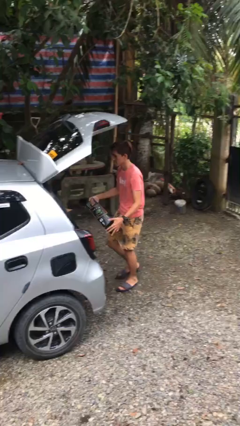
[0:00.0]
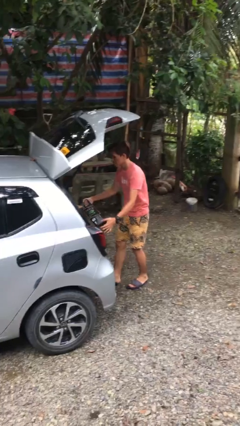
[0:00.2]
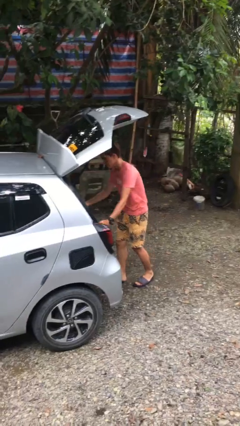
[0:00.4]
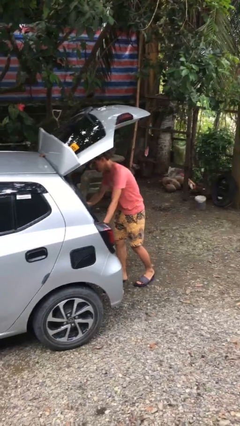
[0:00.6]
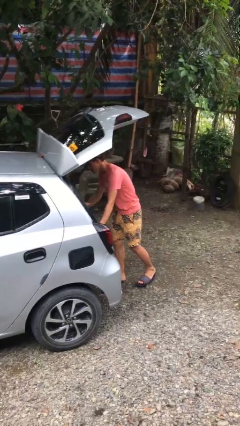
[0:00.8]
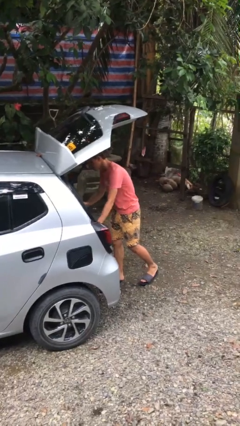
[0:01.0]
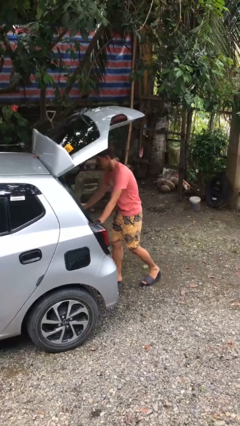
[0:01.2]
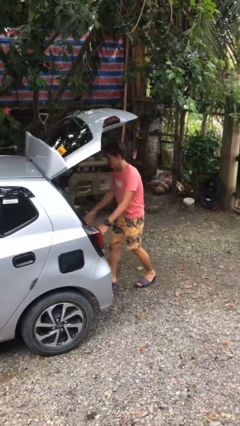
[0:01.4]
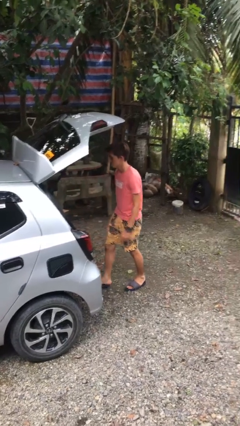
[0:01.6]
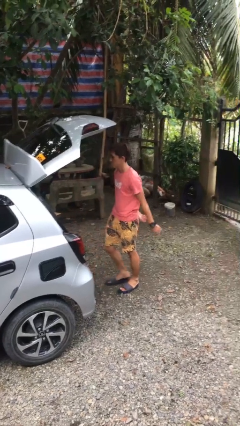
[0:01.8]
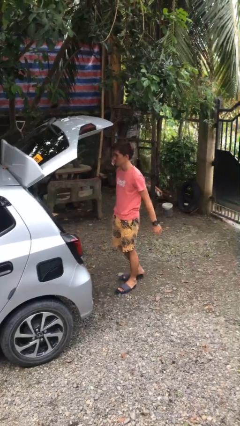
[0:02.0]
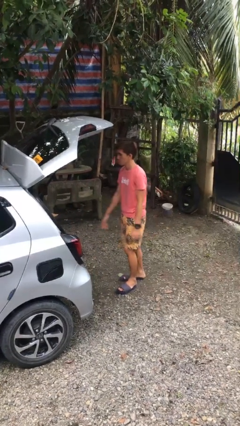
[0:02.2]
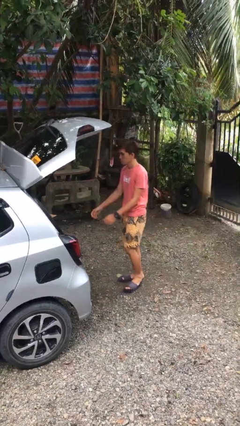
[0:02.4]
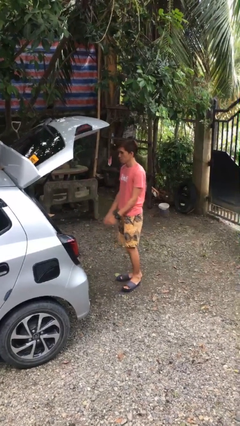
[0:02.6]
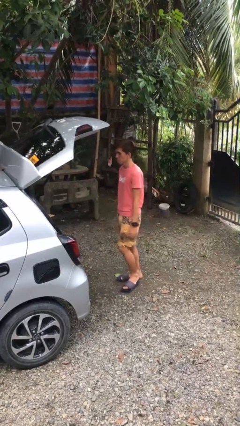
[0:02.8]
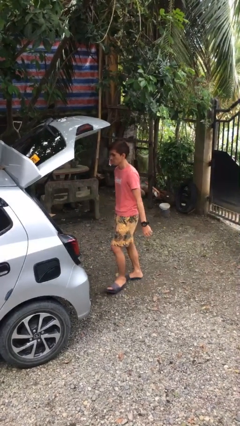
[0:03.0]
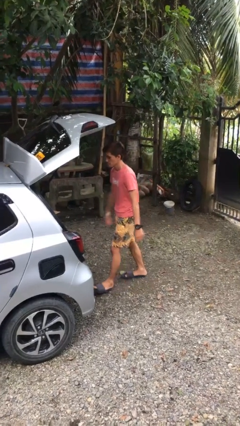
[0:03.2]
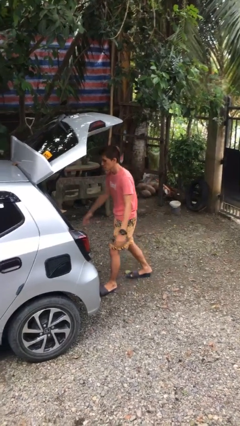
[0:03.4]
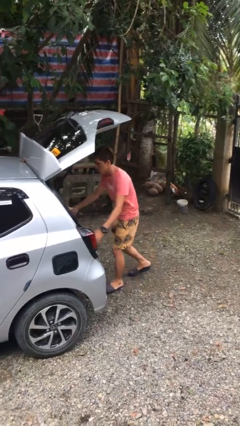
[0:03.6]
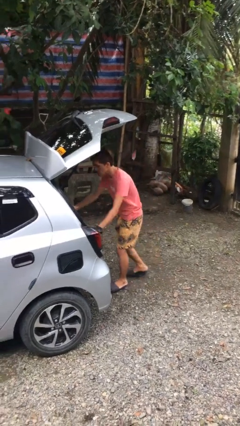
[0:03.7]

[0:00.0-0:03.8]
person loads car

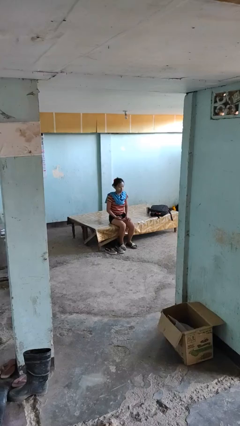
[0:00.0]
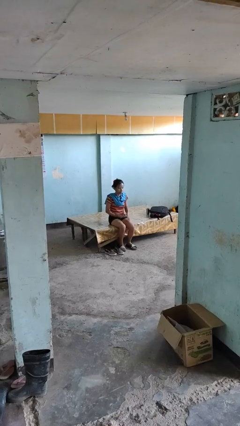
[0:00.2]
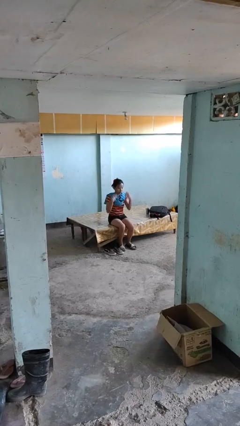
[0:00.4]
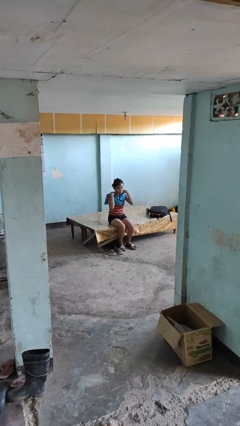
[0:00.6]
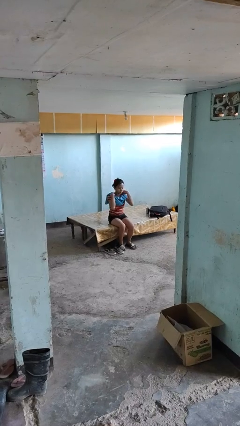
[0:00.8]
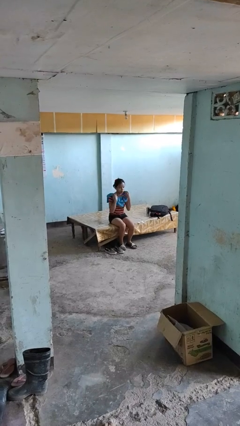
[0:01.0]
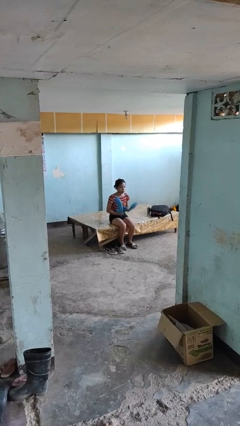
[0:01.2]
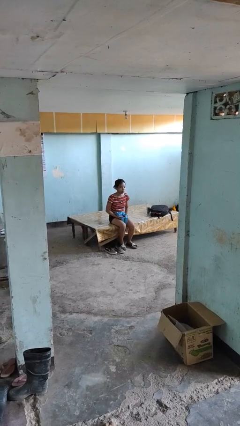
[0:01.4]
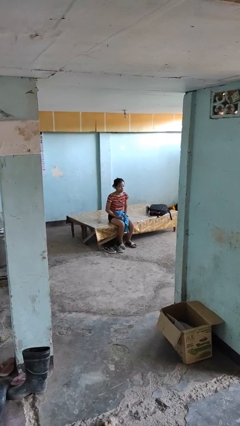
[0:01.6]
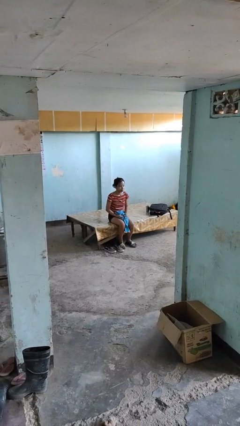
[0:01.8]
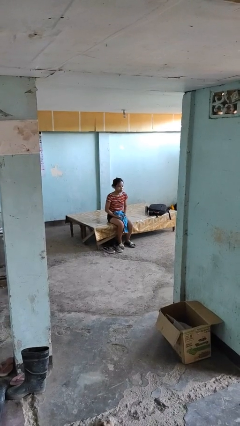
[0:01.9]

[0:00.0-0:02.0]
person takes off scarf

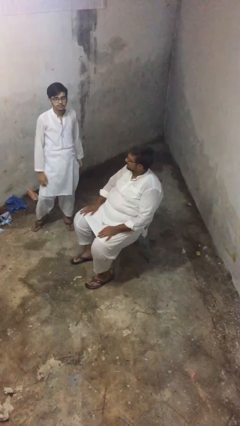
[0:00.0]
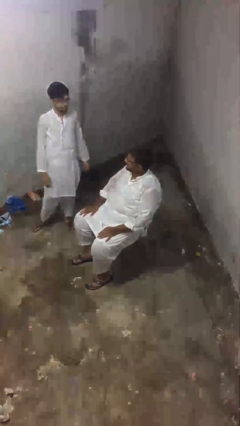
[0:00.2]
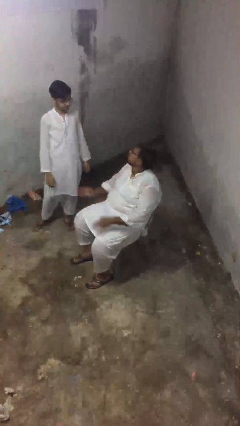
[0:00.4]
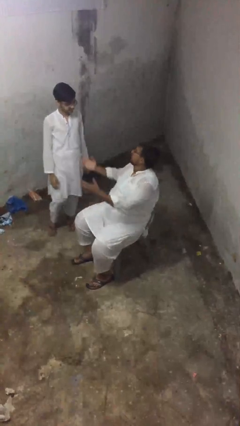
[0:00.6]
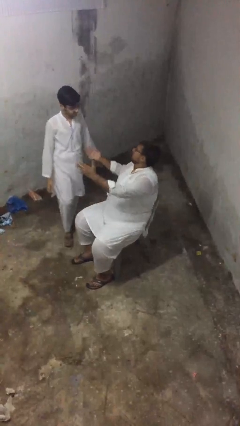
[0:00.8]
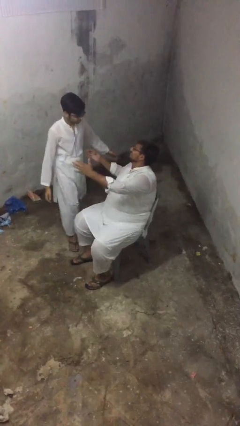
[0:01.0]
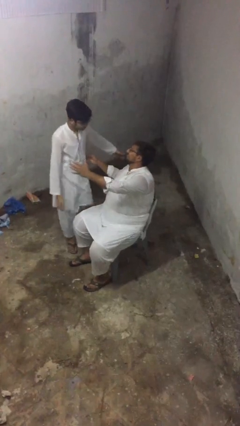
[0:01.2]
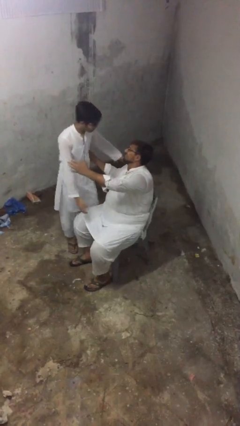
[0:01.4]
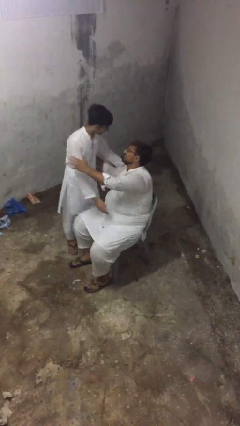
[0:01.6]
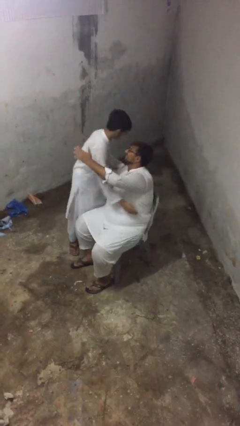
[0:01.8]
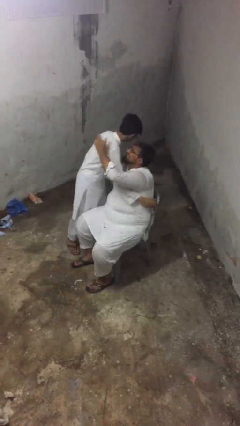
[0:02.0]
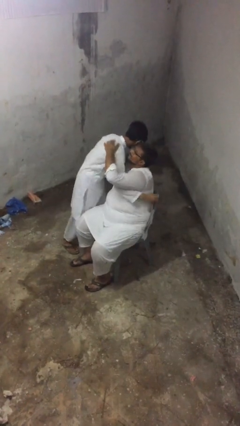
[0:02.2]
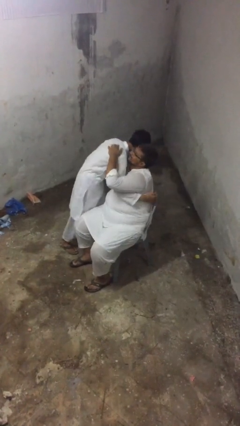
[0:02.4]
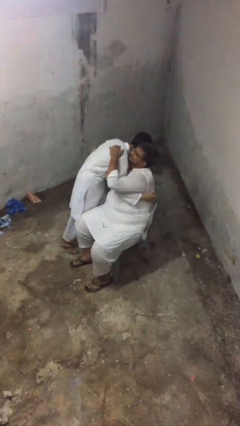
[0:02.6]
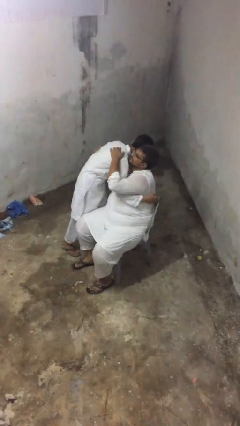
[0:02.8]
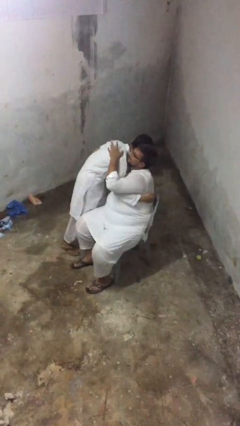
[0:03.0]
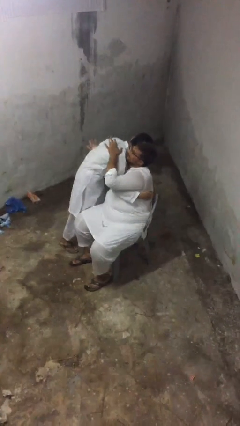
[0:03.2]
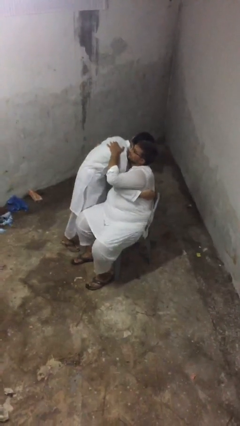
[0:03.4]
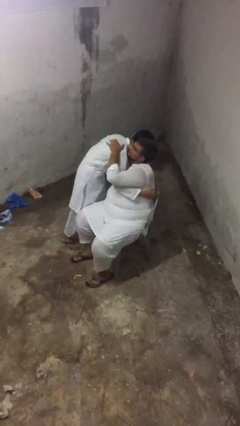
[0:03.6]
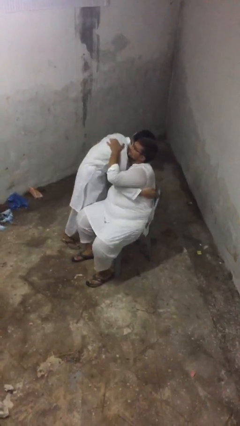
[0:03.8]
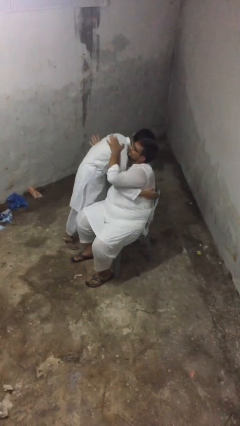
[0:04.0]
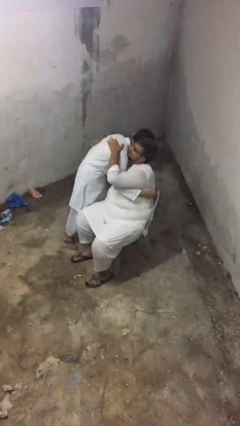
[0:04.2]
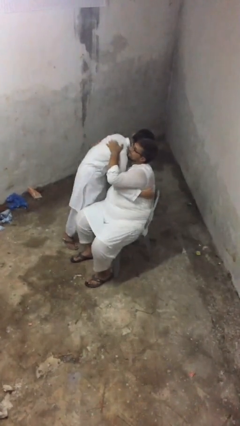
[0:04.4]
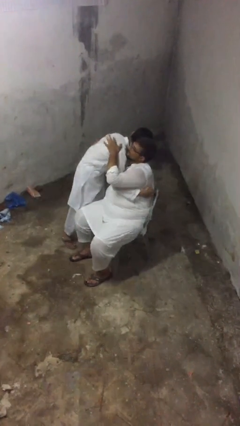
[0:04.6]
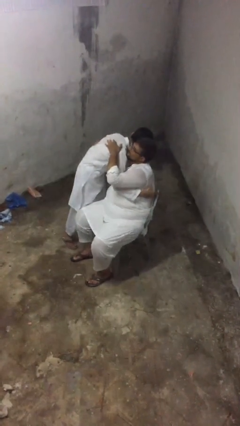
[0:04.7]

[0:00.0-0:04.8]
person embraces person

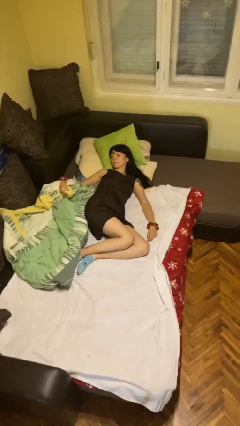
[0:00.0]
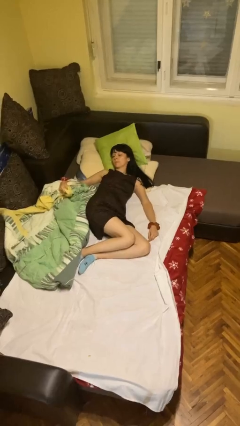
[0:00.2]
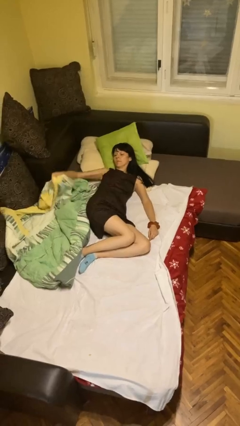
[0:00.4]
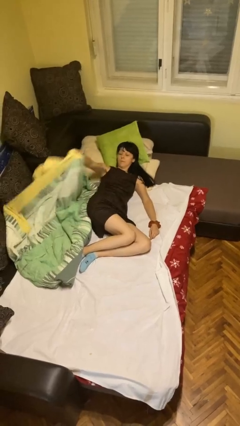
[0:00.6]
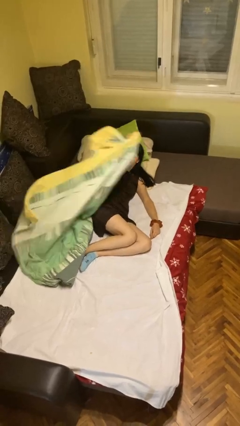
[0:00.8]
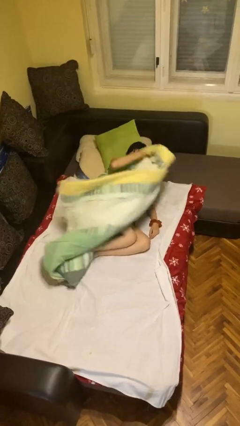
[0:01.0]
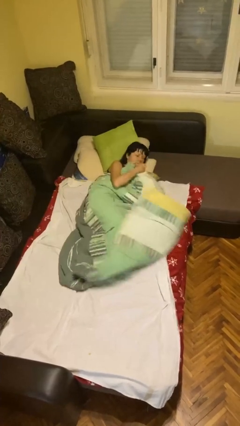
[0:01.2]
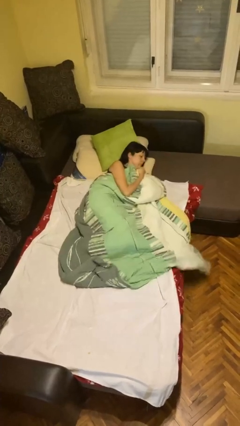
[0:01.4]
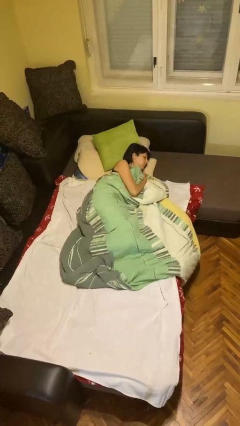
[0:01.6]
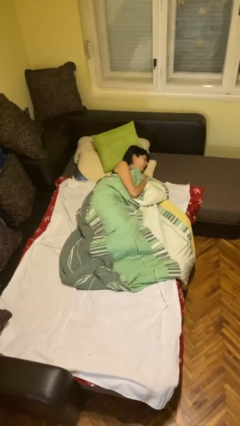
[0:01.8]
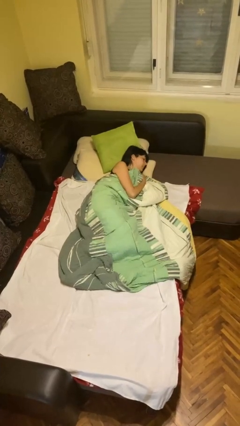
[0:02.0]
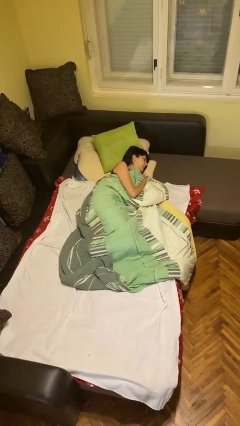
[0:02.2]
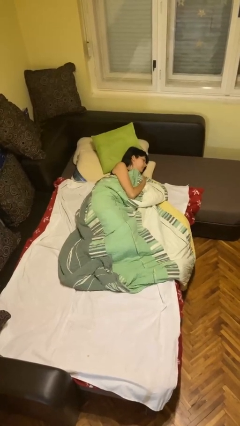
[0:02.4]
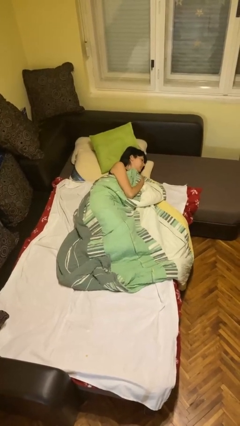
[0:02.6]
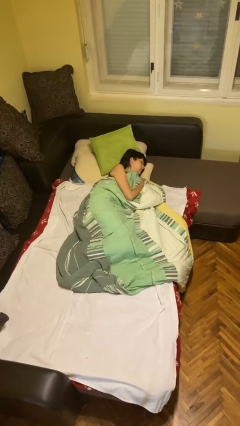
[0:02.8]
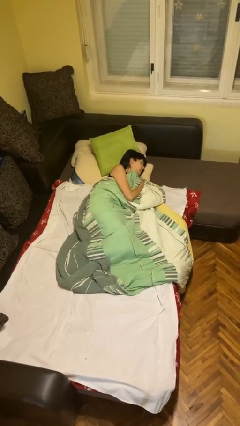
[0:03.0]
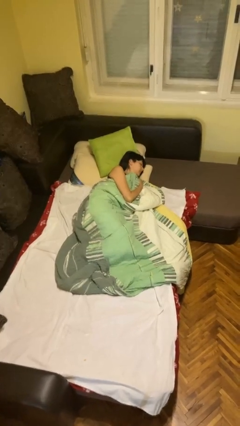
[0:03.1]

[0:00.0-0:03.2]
person covers with bedsheets

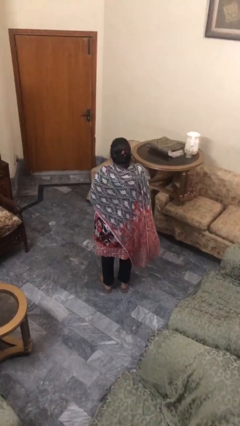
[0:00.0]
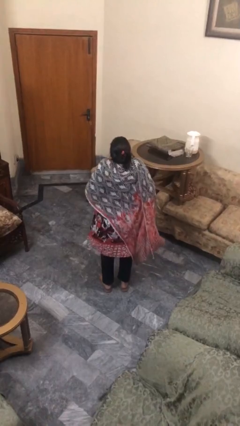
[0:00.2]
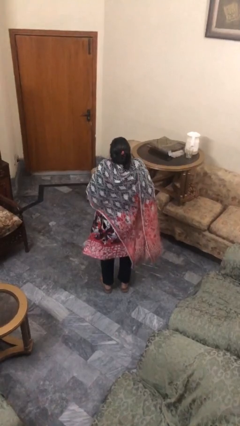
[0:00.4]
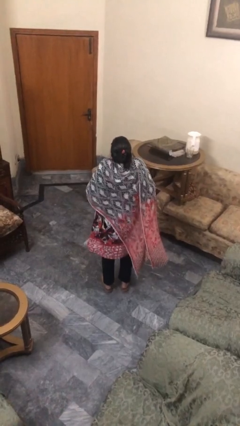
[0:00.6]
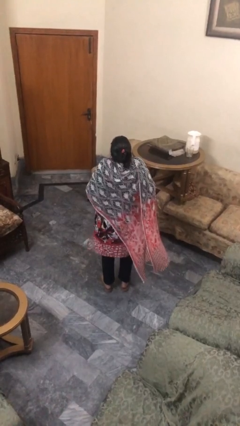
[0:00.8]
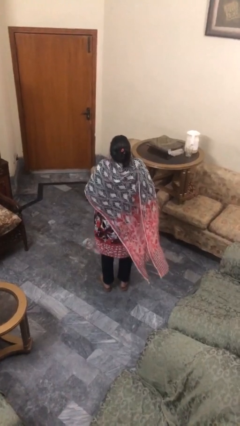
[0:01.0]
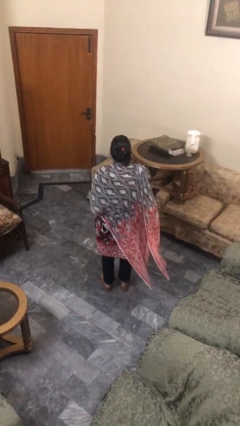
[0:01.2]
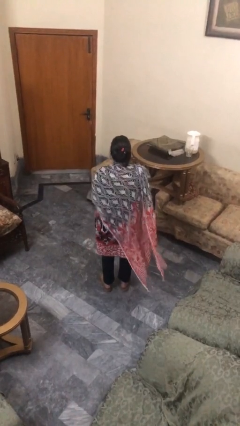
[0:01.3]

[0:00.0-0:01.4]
person shrugs

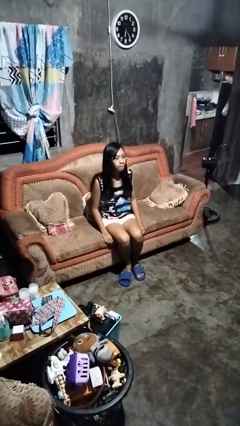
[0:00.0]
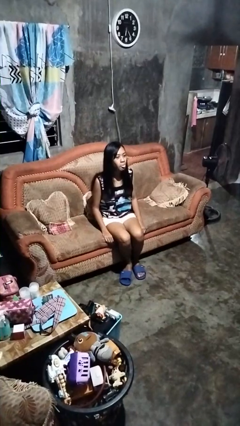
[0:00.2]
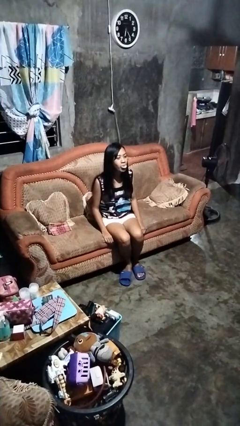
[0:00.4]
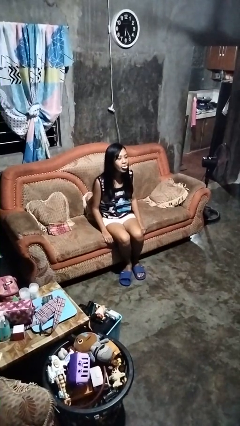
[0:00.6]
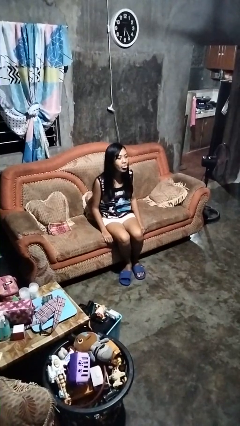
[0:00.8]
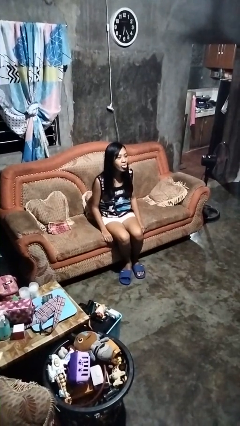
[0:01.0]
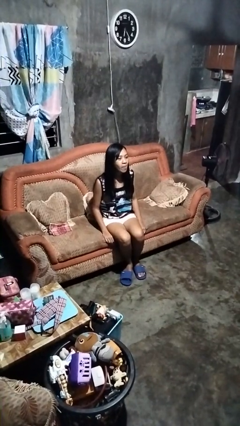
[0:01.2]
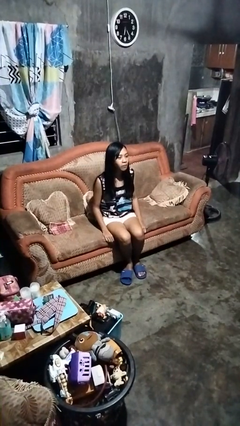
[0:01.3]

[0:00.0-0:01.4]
person sticks out tongue

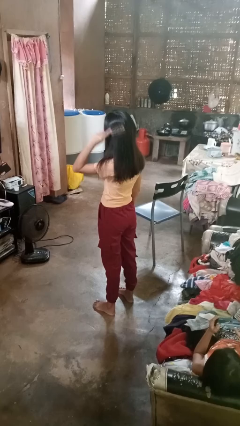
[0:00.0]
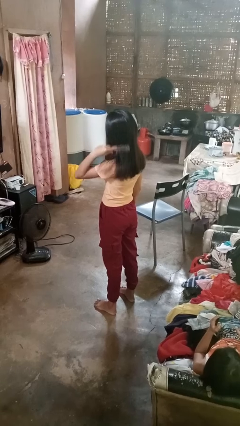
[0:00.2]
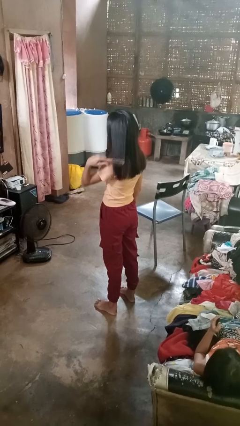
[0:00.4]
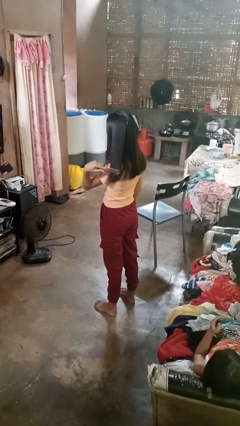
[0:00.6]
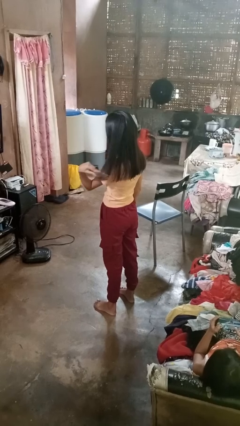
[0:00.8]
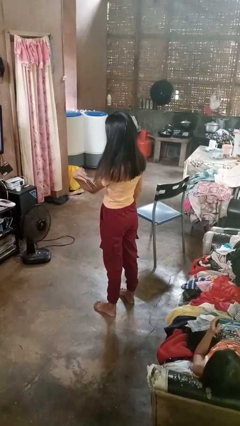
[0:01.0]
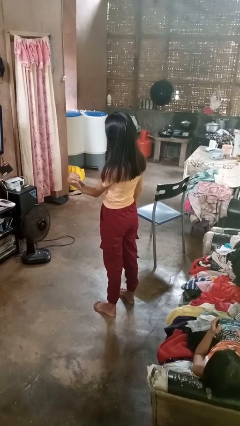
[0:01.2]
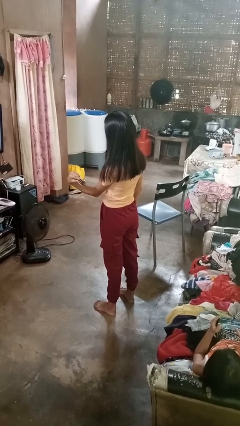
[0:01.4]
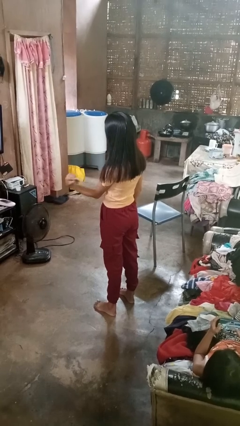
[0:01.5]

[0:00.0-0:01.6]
person brushes hair
